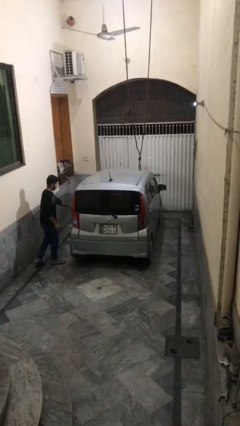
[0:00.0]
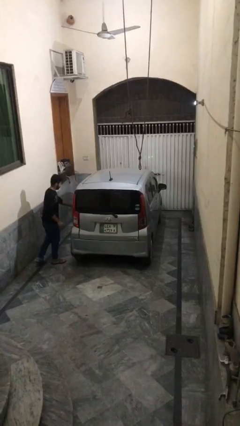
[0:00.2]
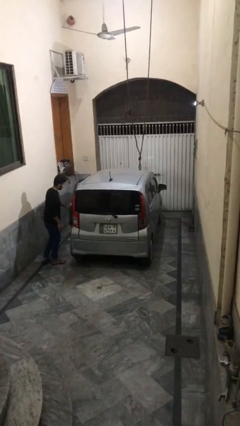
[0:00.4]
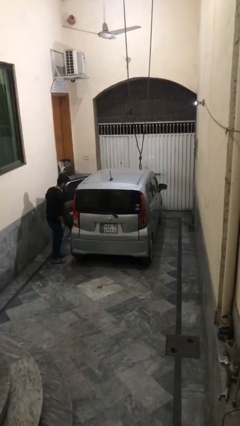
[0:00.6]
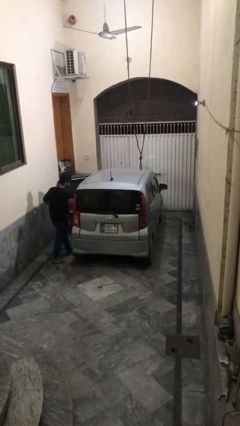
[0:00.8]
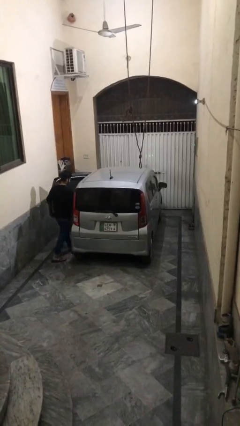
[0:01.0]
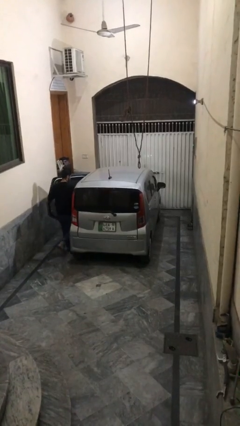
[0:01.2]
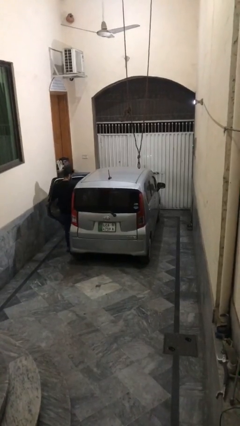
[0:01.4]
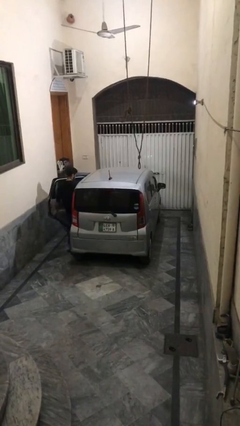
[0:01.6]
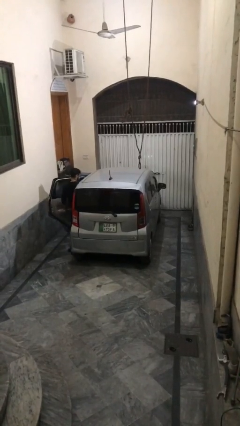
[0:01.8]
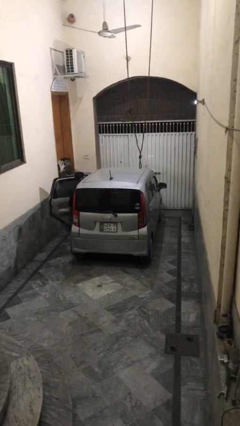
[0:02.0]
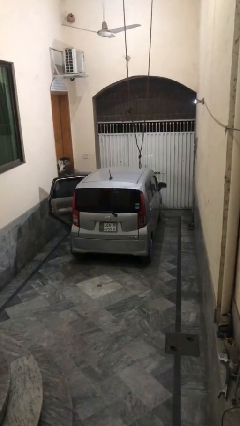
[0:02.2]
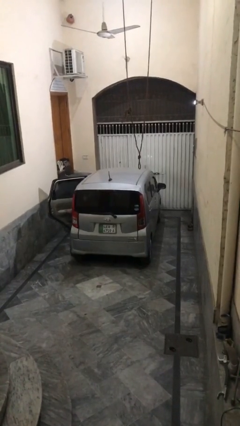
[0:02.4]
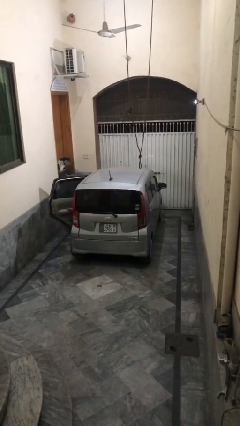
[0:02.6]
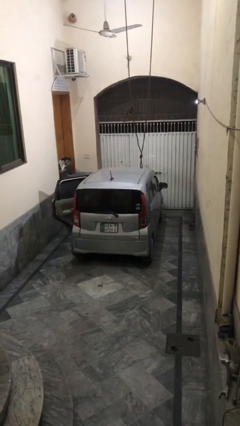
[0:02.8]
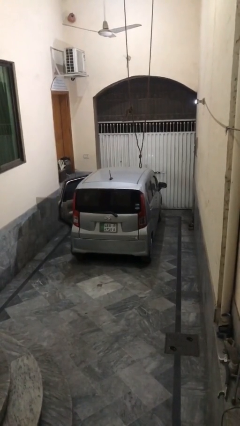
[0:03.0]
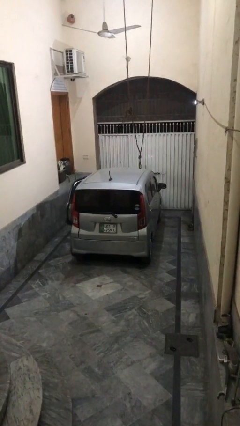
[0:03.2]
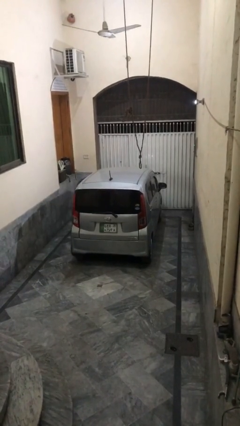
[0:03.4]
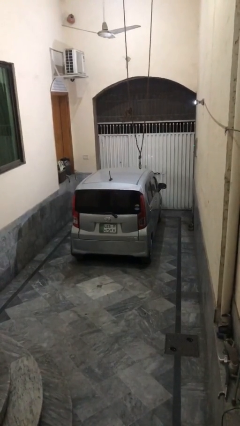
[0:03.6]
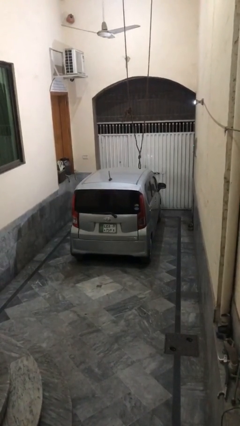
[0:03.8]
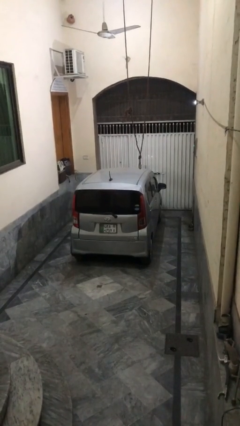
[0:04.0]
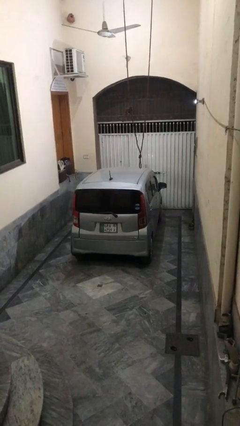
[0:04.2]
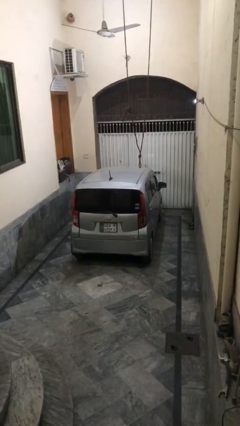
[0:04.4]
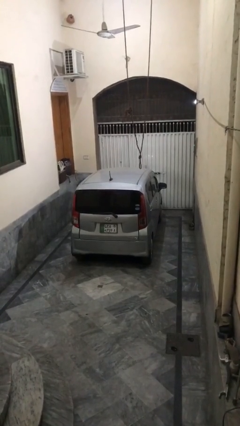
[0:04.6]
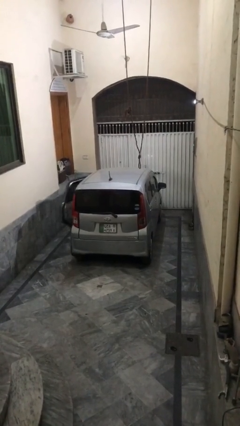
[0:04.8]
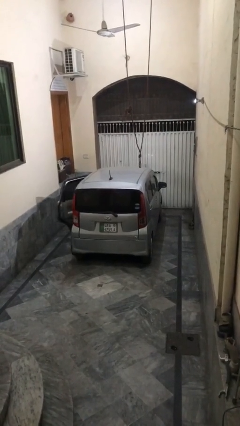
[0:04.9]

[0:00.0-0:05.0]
car picks up person

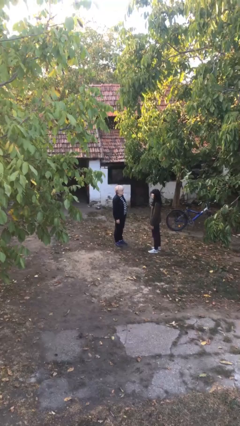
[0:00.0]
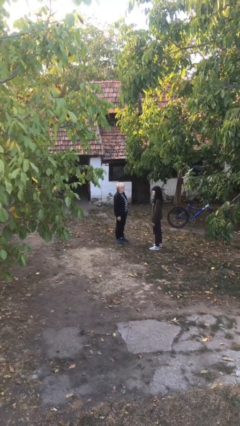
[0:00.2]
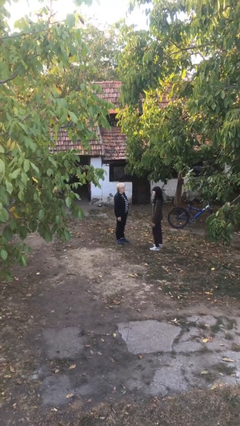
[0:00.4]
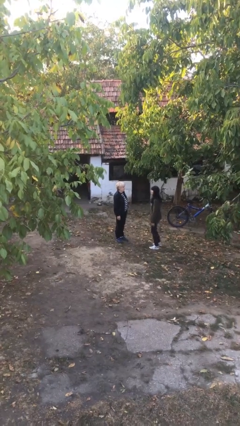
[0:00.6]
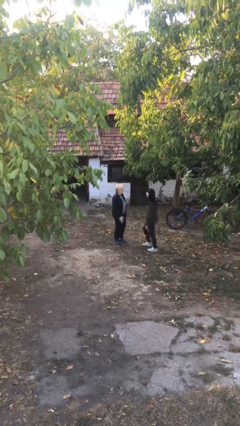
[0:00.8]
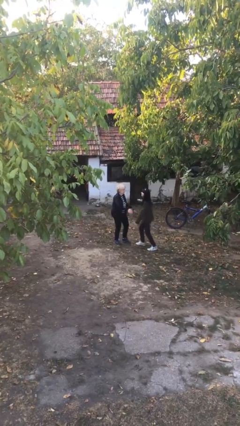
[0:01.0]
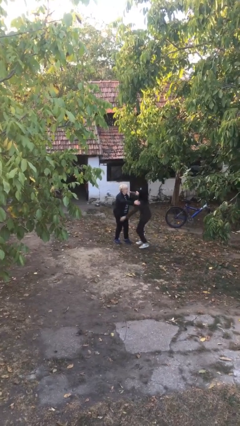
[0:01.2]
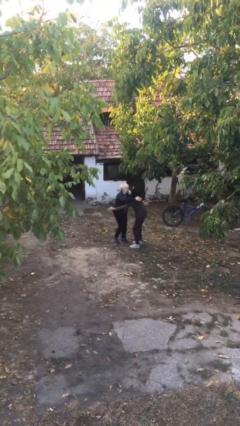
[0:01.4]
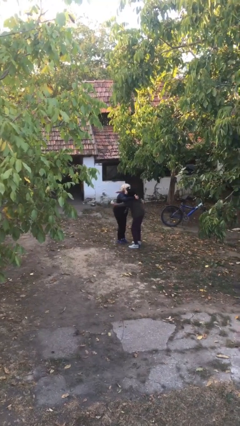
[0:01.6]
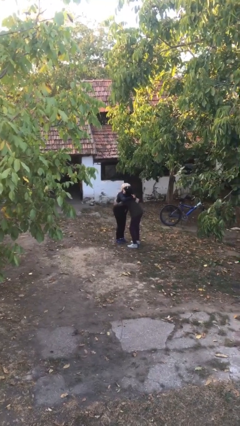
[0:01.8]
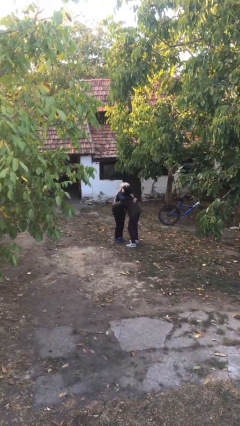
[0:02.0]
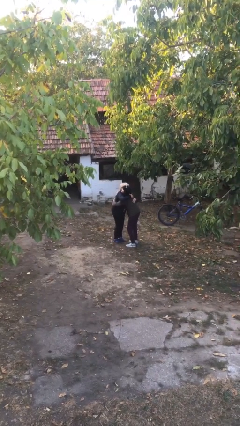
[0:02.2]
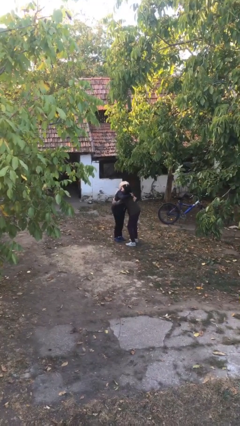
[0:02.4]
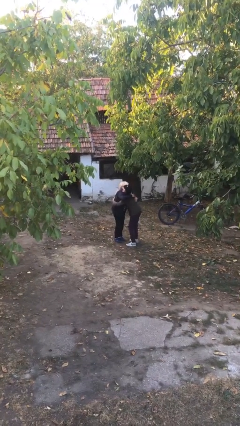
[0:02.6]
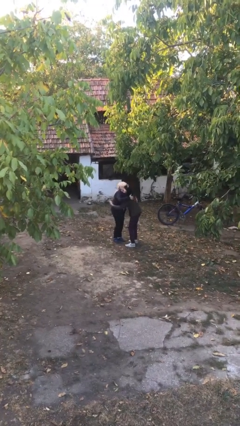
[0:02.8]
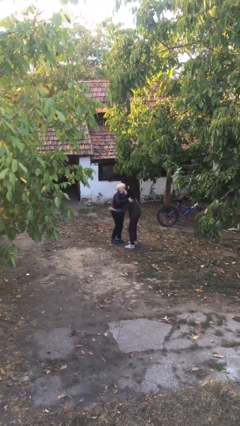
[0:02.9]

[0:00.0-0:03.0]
person embraces person

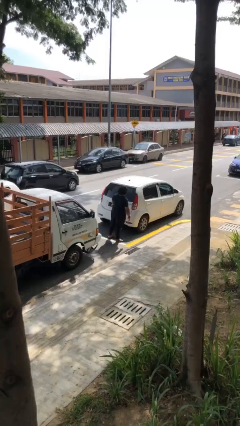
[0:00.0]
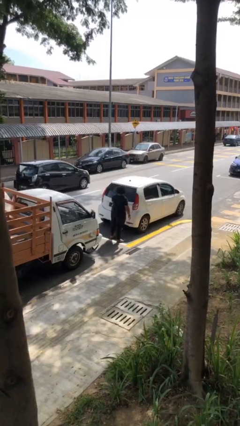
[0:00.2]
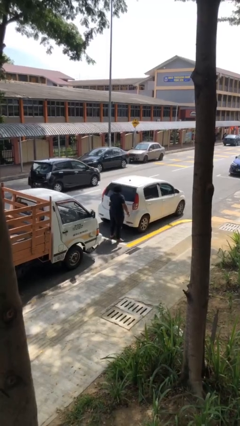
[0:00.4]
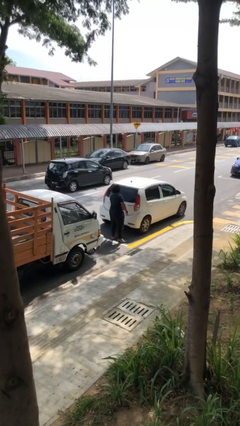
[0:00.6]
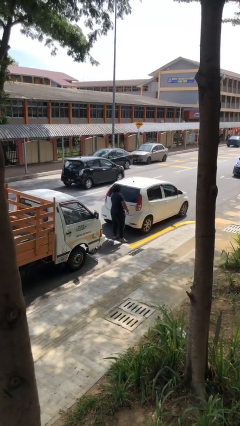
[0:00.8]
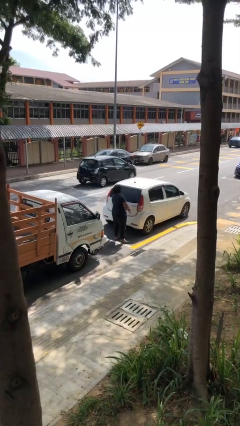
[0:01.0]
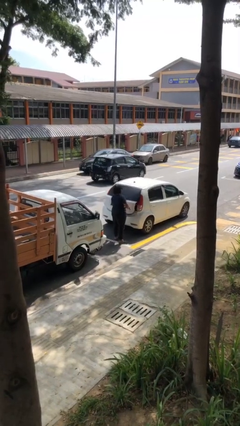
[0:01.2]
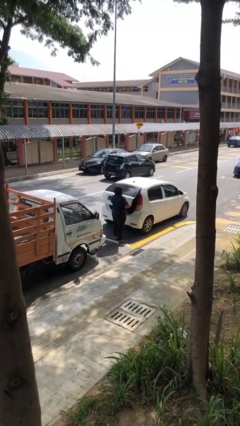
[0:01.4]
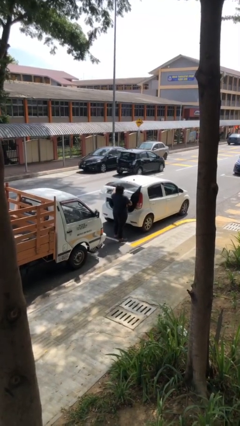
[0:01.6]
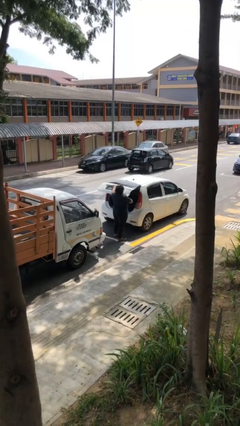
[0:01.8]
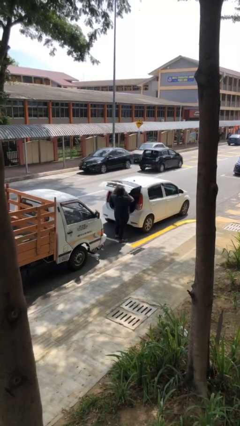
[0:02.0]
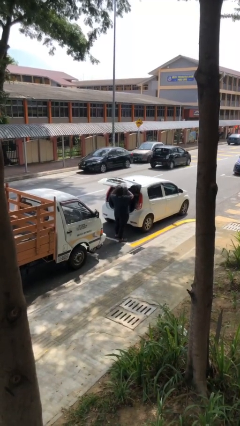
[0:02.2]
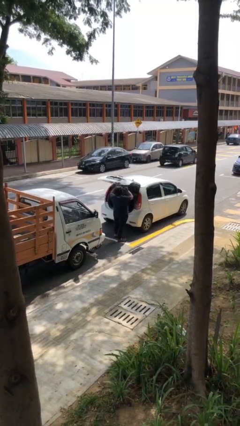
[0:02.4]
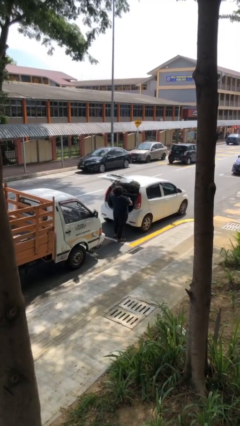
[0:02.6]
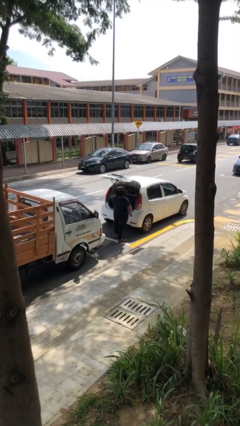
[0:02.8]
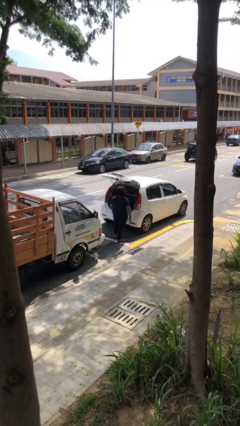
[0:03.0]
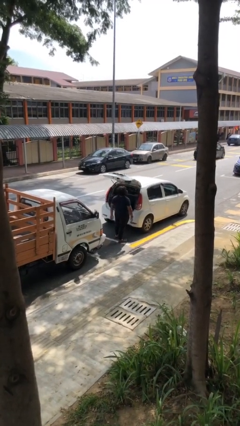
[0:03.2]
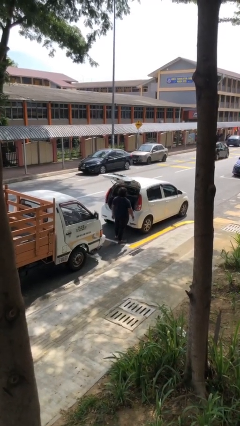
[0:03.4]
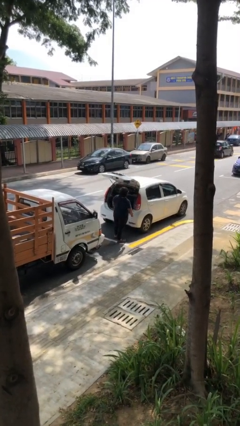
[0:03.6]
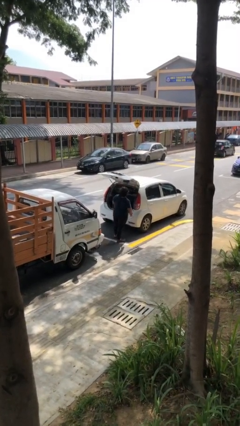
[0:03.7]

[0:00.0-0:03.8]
person opens car trunk

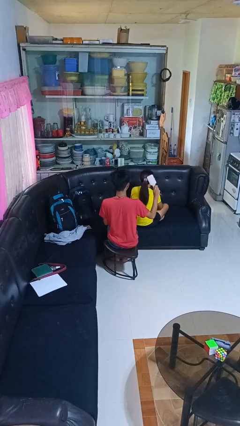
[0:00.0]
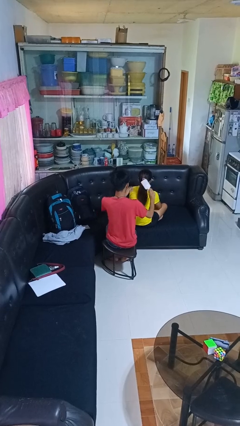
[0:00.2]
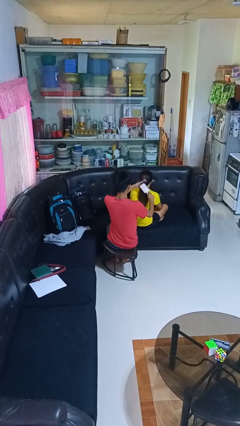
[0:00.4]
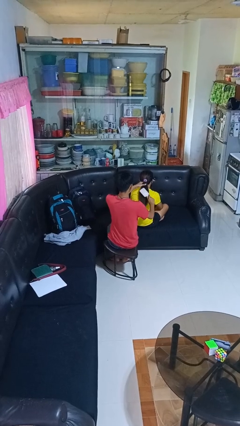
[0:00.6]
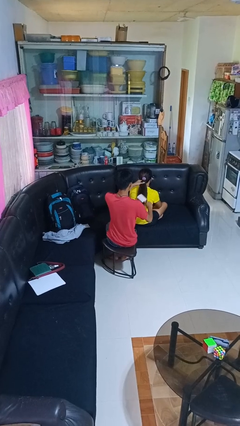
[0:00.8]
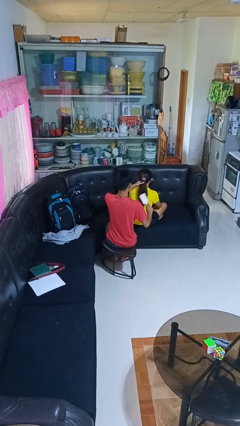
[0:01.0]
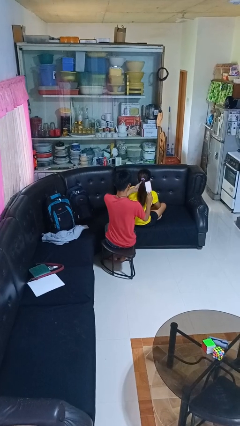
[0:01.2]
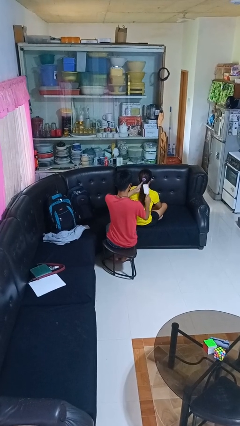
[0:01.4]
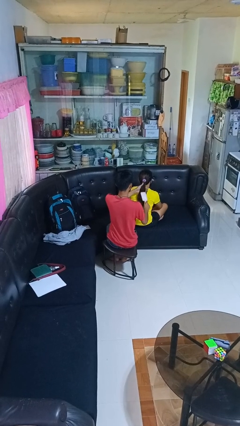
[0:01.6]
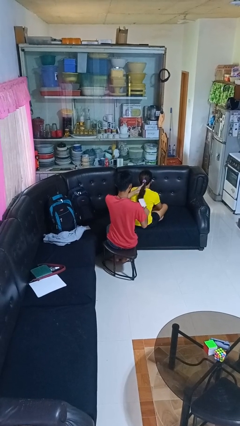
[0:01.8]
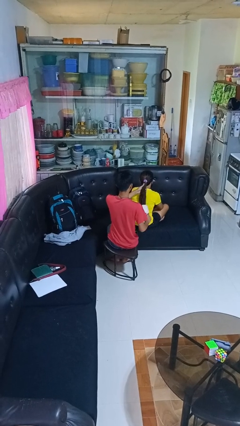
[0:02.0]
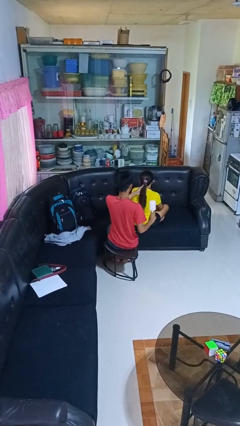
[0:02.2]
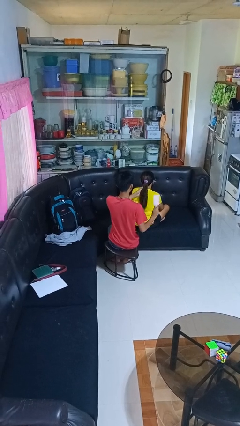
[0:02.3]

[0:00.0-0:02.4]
person brushes hair of person

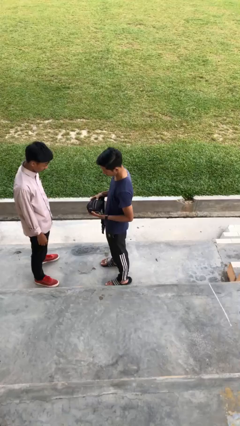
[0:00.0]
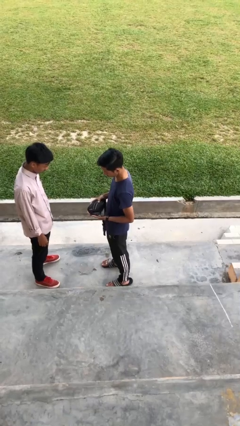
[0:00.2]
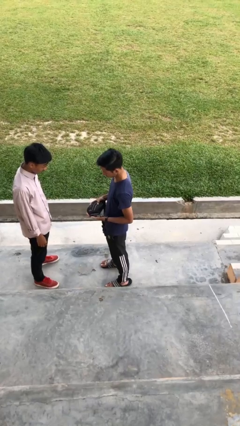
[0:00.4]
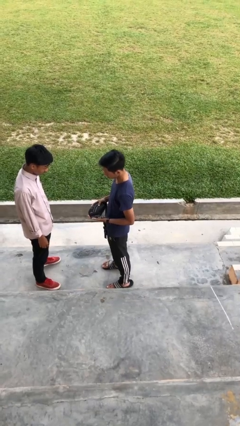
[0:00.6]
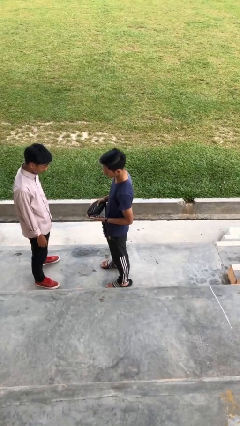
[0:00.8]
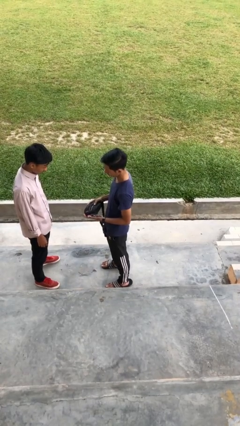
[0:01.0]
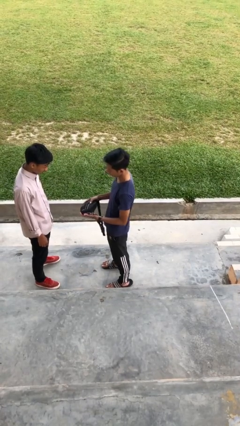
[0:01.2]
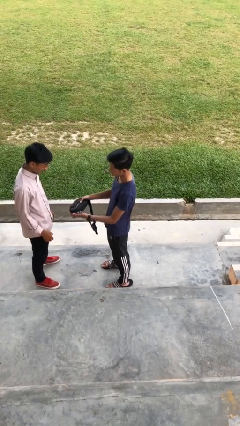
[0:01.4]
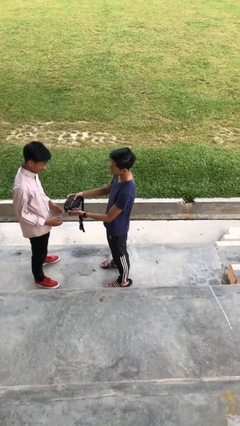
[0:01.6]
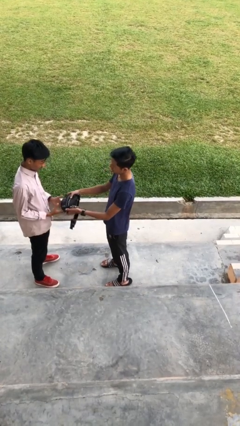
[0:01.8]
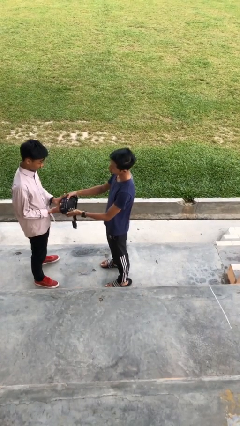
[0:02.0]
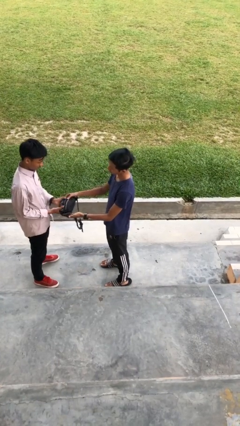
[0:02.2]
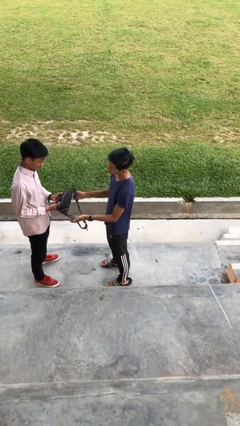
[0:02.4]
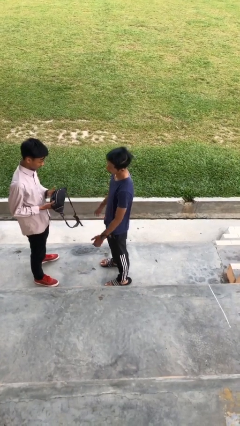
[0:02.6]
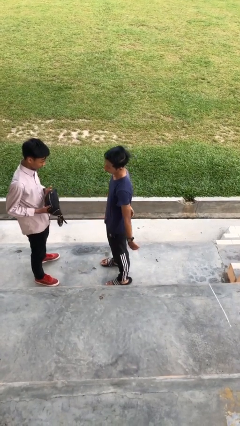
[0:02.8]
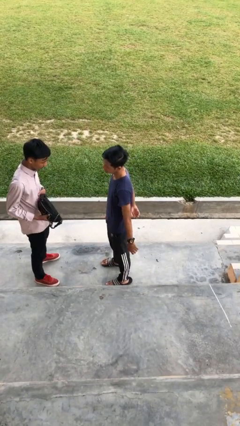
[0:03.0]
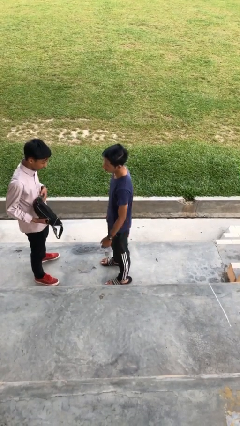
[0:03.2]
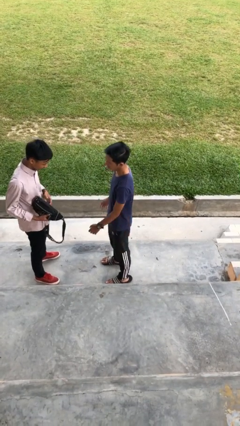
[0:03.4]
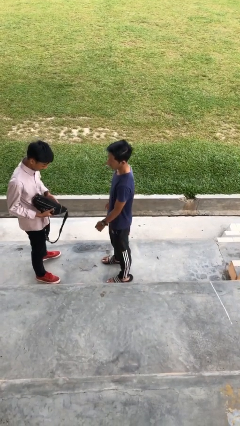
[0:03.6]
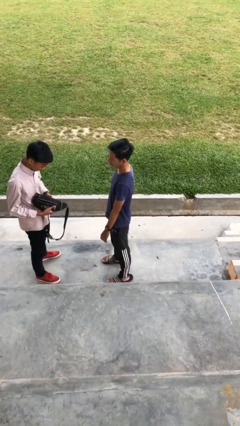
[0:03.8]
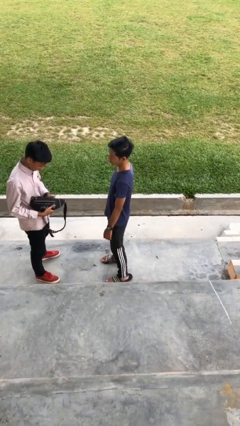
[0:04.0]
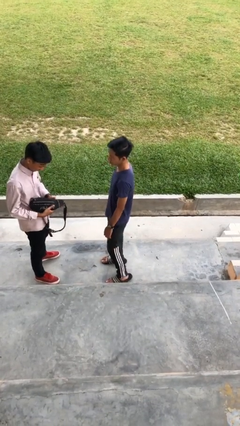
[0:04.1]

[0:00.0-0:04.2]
person transfers object to person
